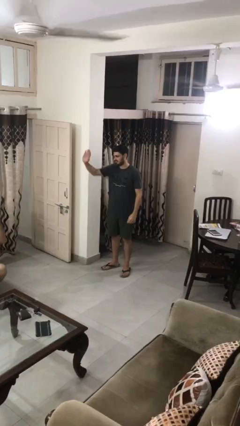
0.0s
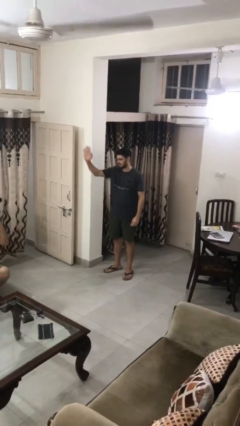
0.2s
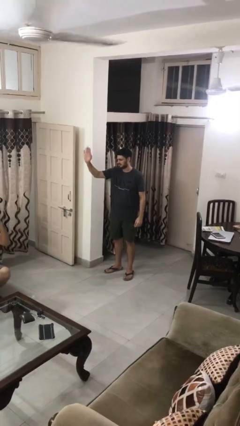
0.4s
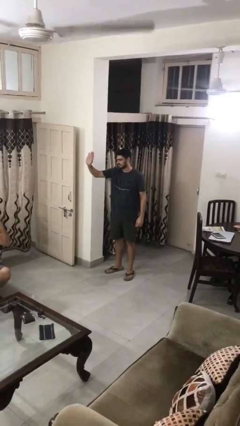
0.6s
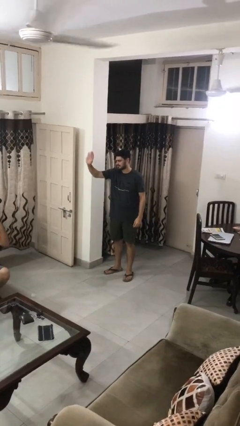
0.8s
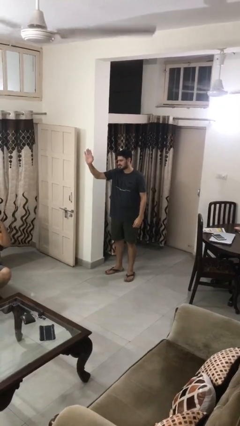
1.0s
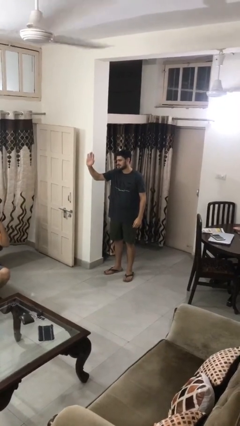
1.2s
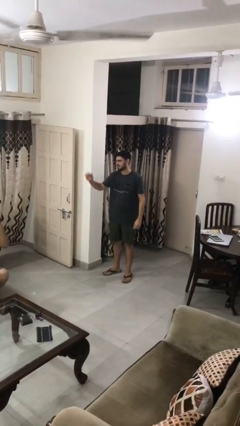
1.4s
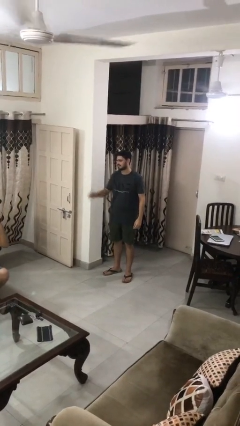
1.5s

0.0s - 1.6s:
person waves at person

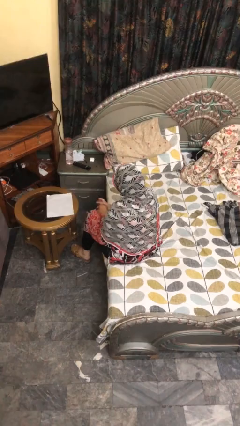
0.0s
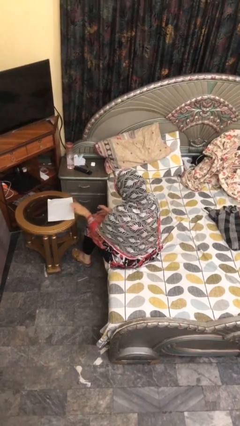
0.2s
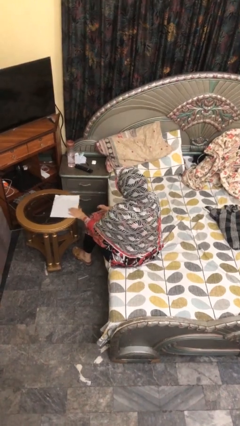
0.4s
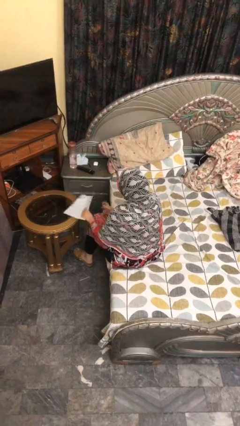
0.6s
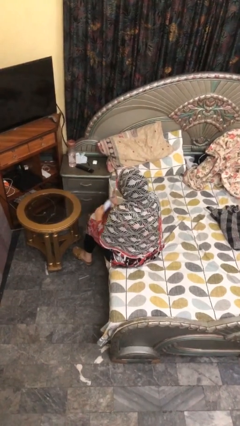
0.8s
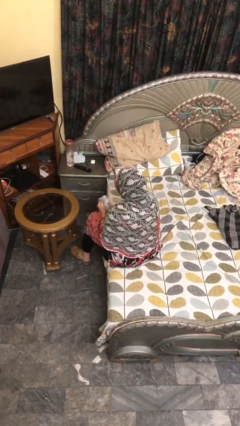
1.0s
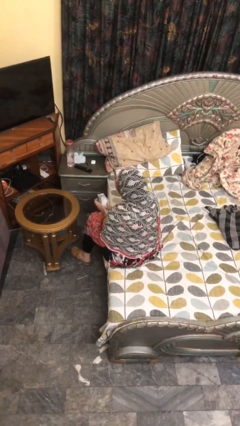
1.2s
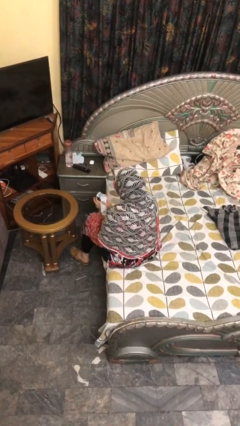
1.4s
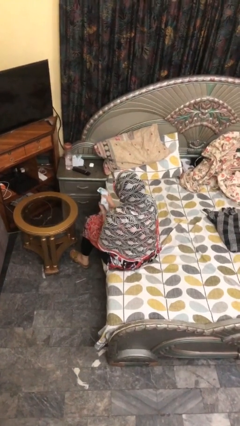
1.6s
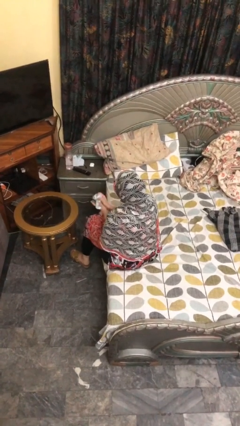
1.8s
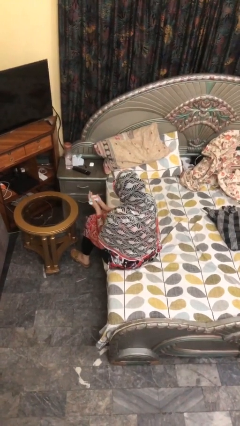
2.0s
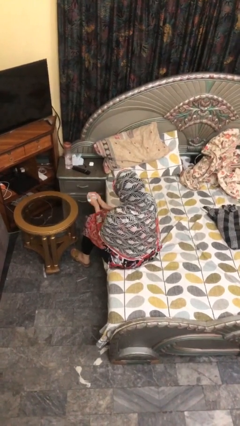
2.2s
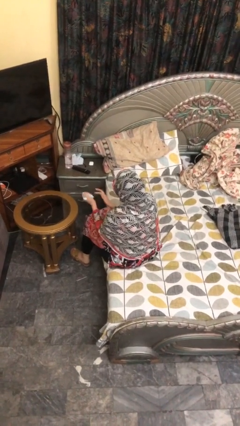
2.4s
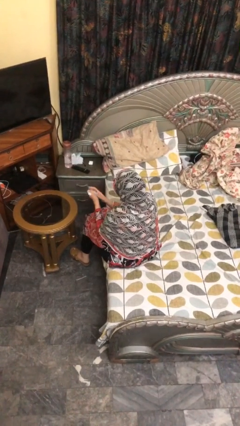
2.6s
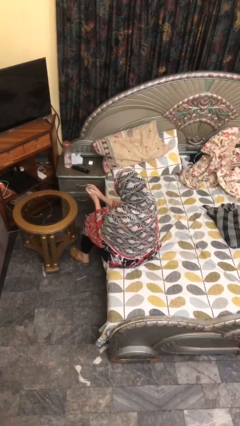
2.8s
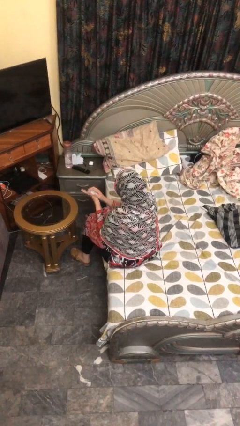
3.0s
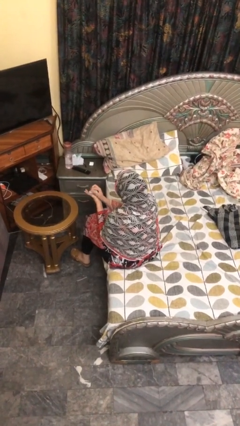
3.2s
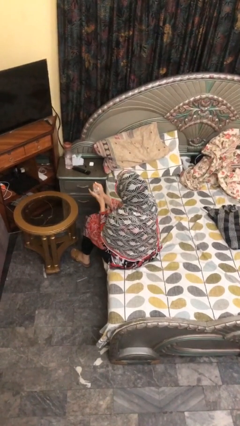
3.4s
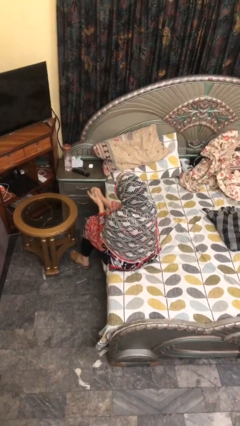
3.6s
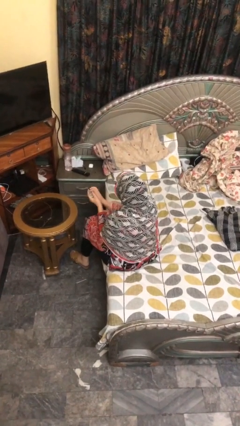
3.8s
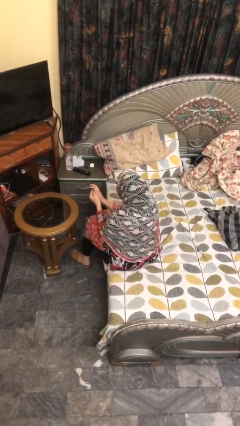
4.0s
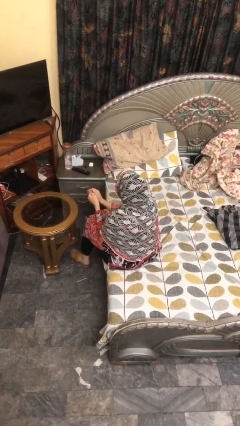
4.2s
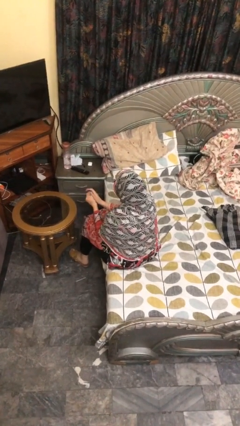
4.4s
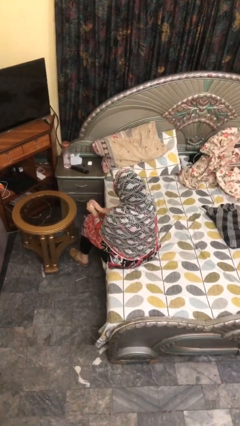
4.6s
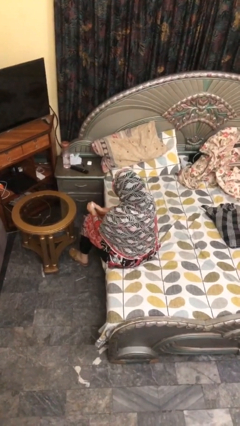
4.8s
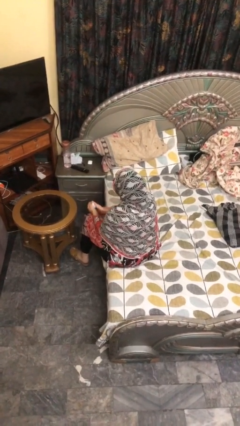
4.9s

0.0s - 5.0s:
person crumples paper

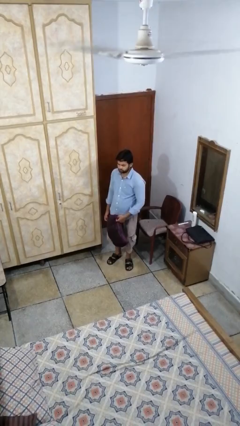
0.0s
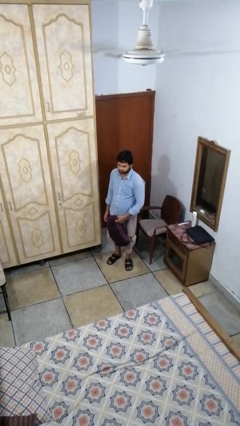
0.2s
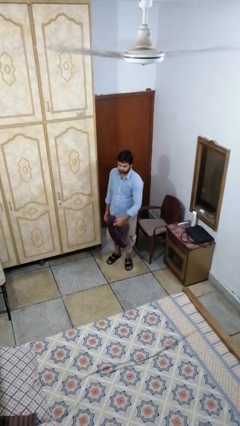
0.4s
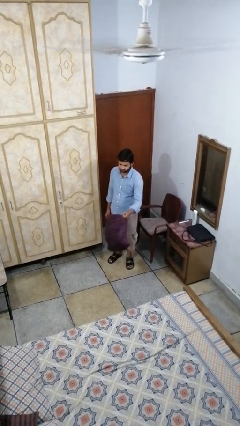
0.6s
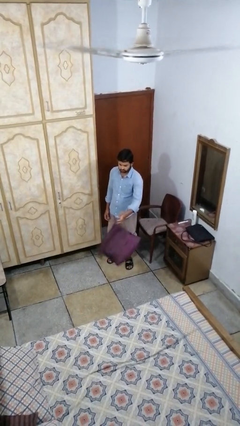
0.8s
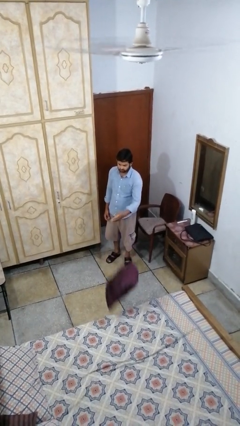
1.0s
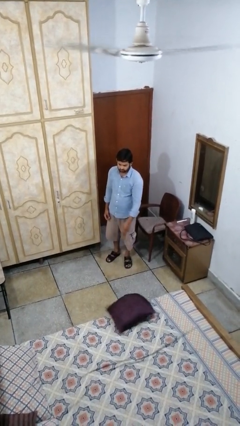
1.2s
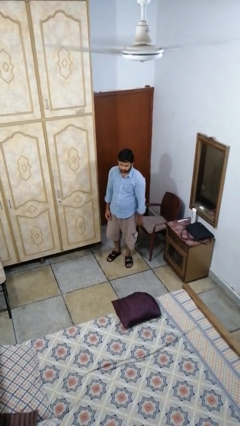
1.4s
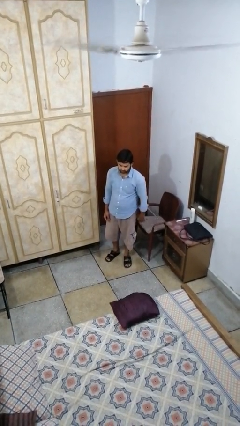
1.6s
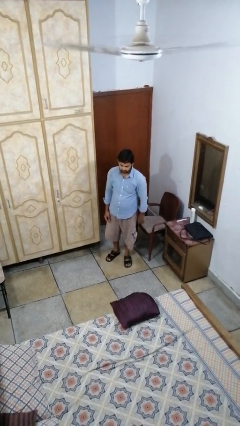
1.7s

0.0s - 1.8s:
person throws object on bed

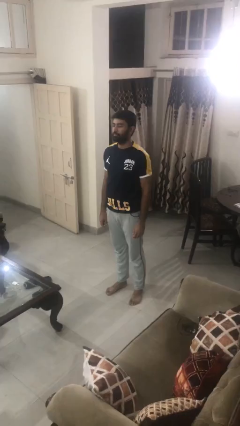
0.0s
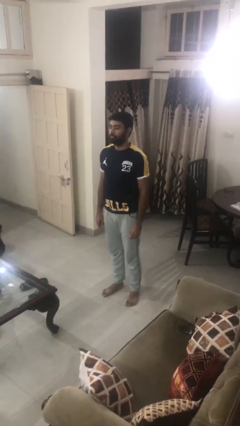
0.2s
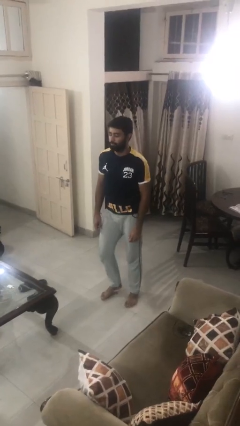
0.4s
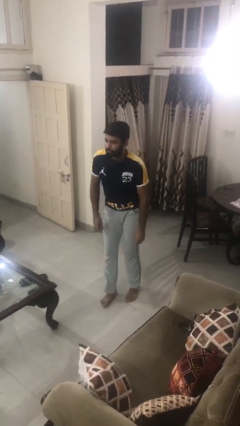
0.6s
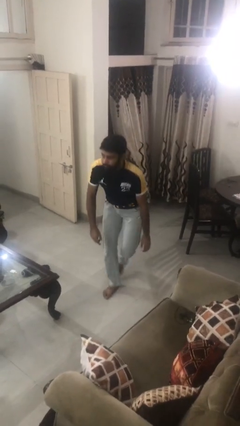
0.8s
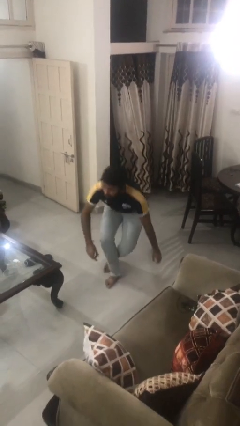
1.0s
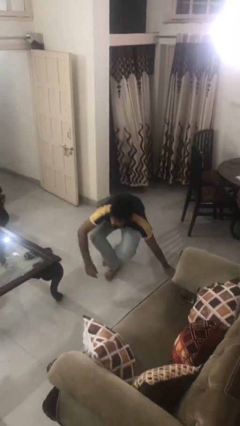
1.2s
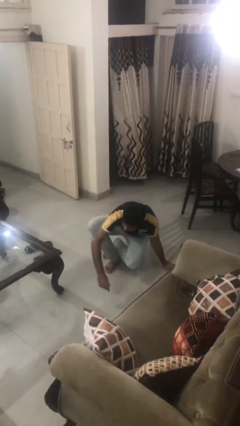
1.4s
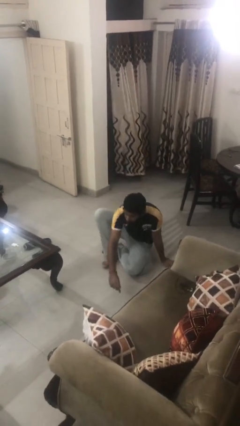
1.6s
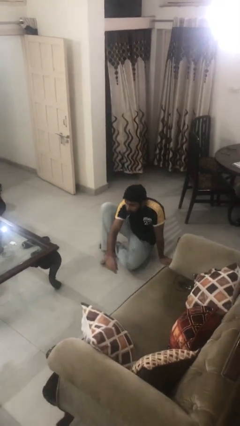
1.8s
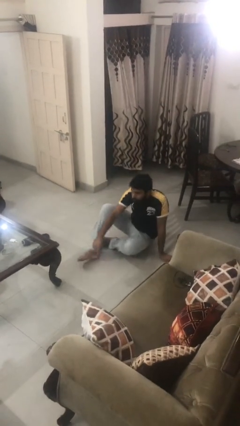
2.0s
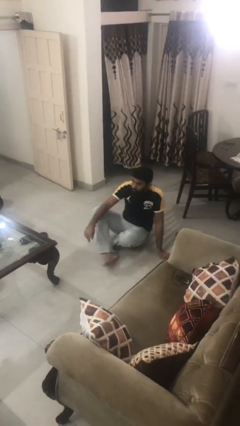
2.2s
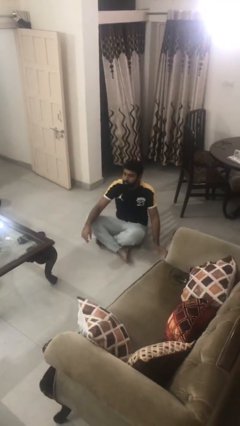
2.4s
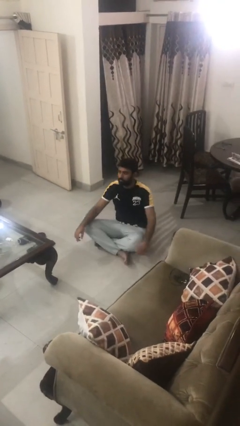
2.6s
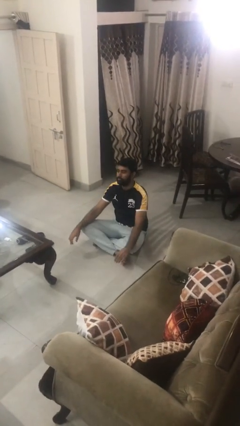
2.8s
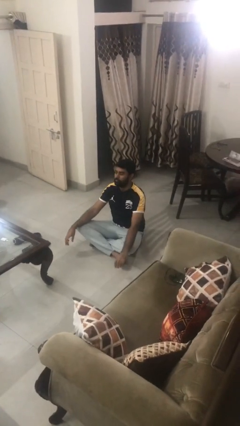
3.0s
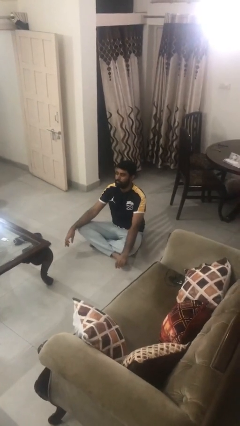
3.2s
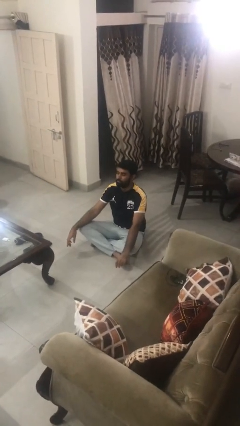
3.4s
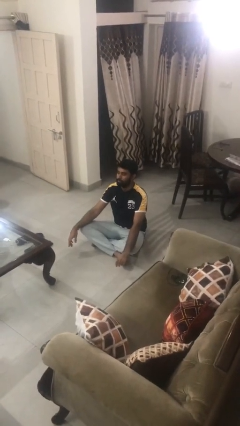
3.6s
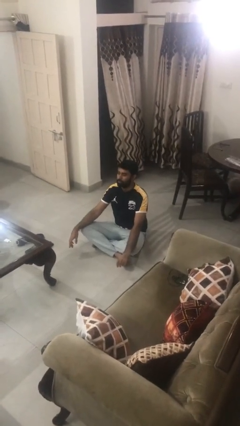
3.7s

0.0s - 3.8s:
person sits crisscross

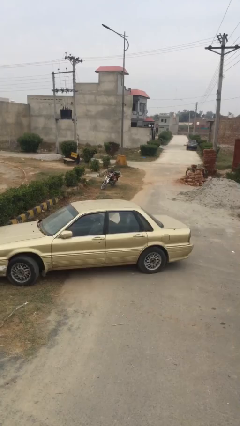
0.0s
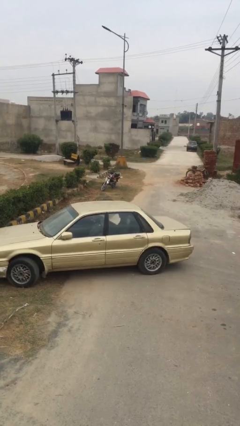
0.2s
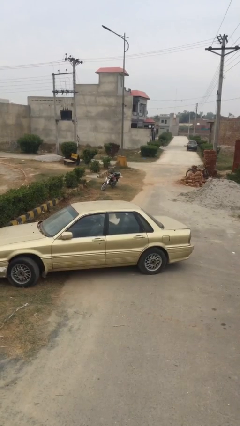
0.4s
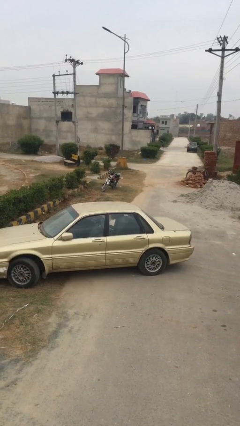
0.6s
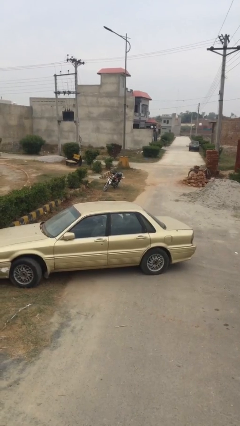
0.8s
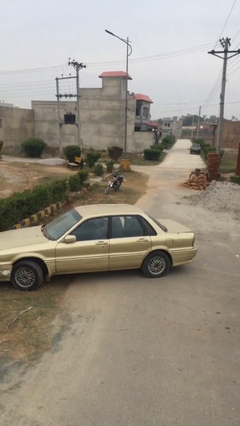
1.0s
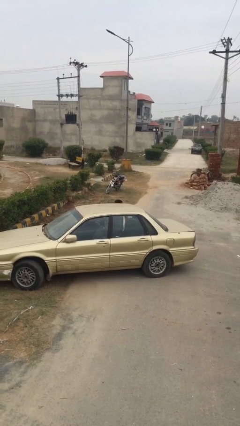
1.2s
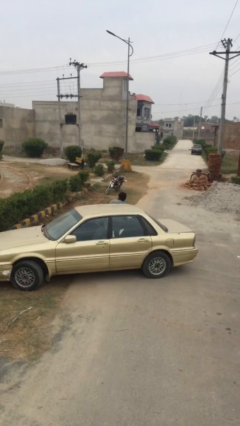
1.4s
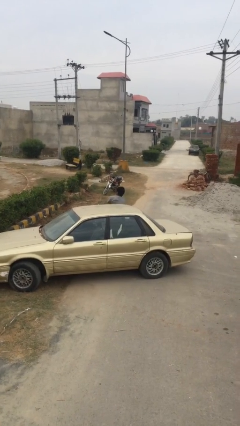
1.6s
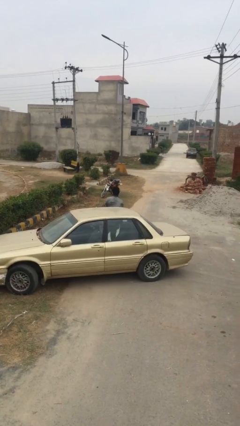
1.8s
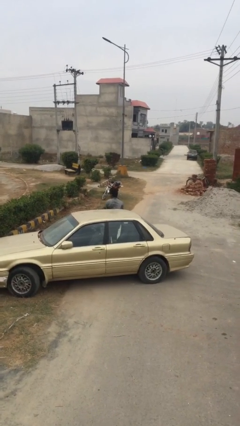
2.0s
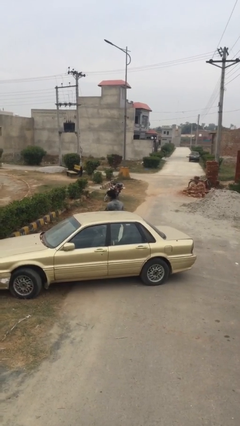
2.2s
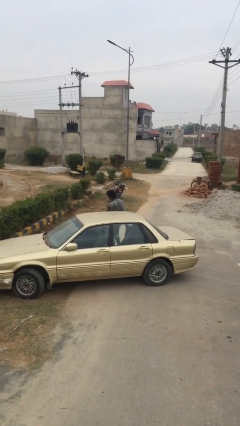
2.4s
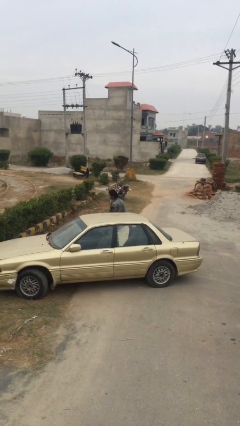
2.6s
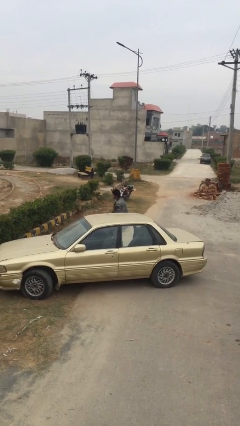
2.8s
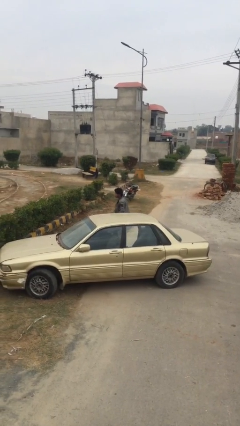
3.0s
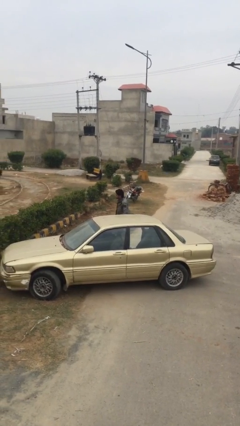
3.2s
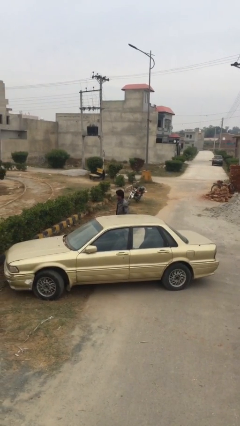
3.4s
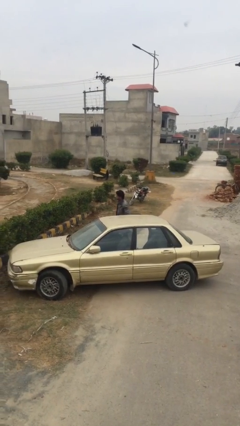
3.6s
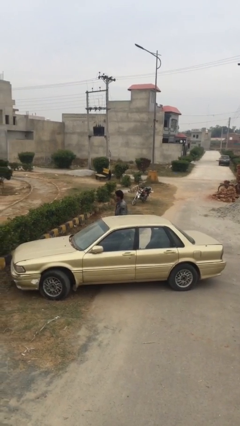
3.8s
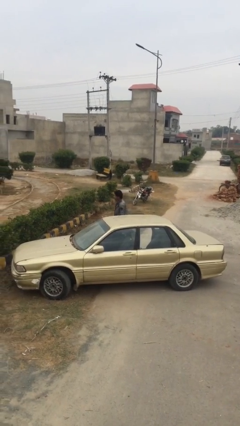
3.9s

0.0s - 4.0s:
person exits car

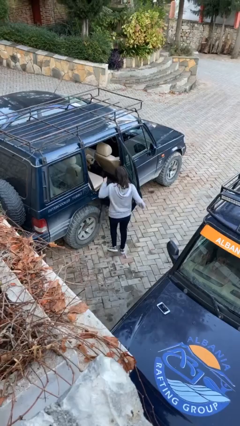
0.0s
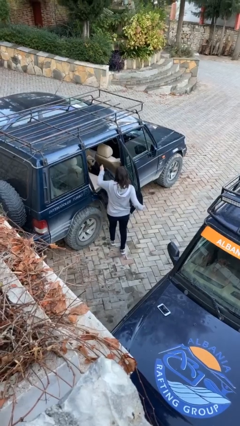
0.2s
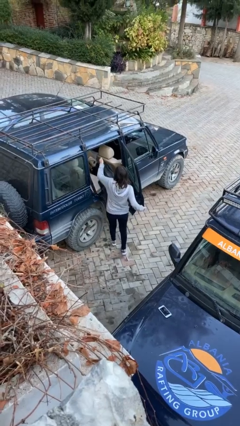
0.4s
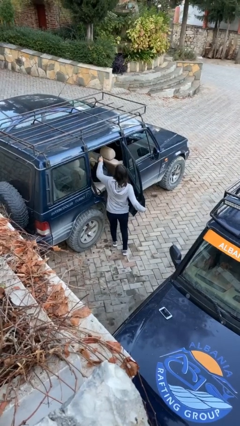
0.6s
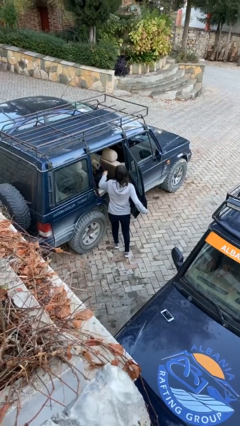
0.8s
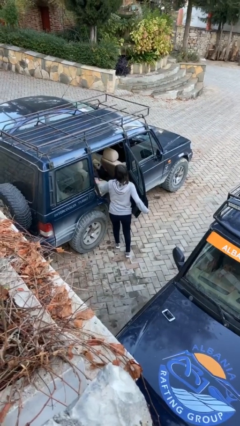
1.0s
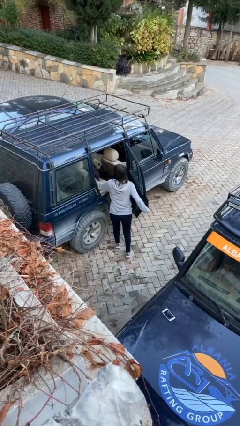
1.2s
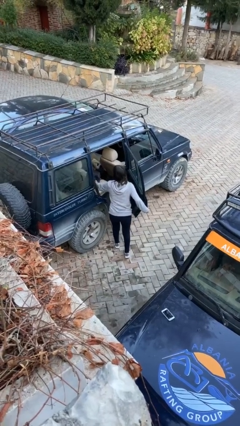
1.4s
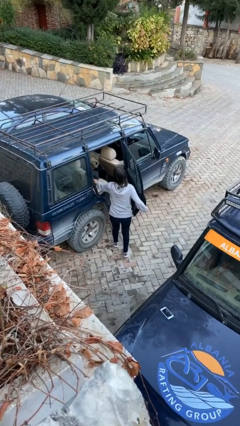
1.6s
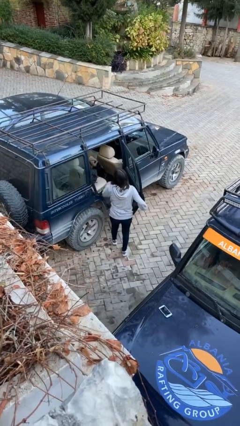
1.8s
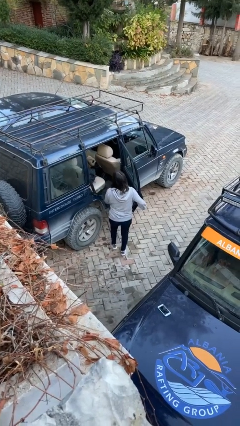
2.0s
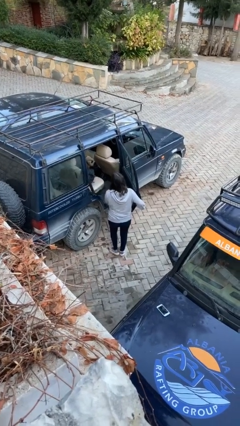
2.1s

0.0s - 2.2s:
person loads car
